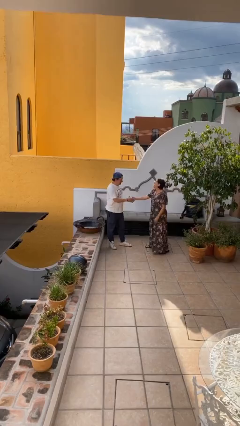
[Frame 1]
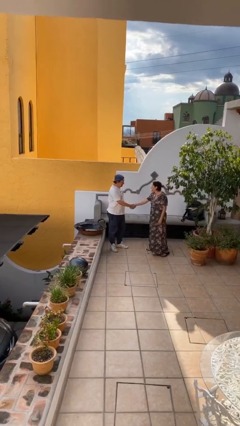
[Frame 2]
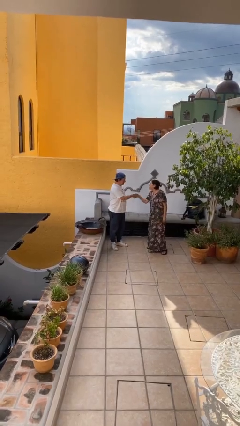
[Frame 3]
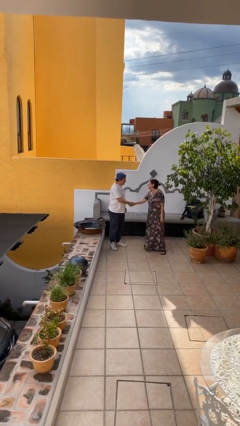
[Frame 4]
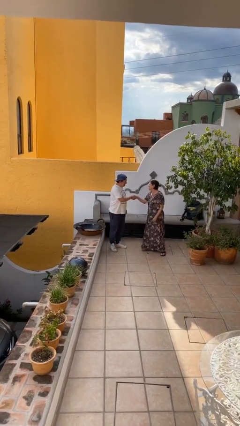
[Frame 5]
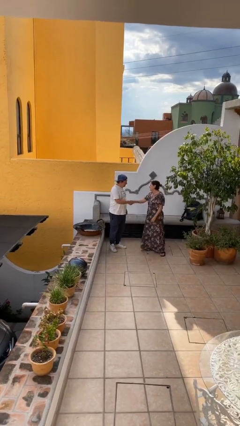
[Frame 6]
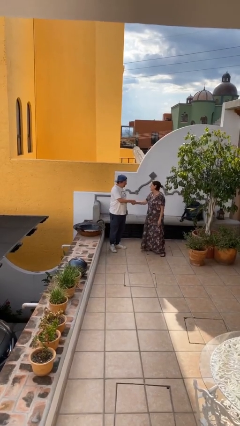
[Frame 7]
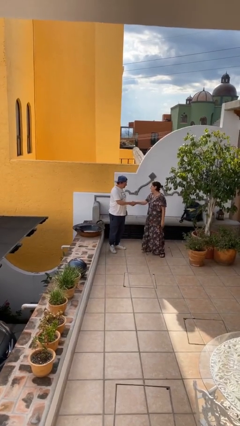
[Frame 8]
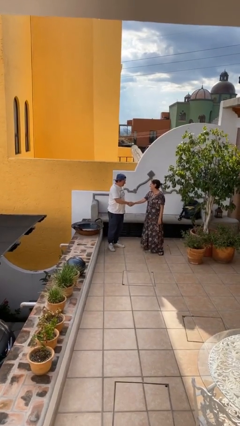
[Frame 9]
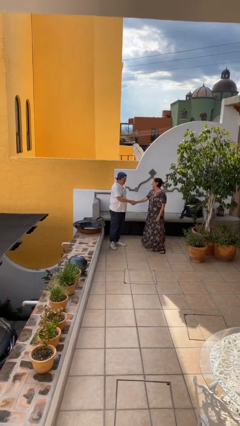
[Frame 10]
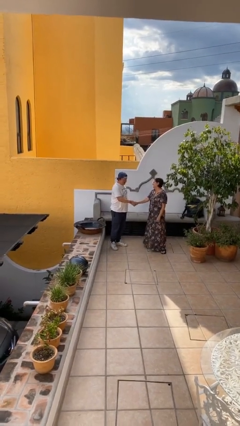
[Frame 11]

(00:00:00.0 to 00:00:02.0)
person shakes hand

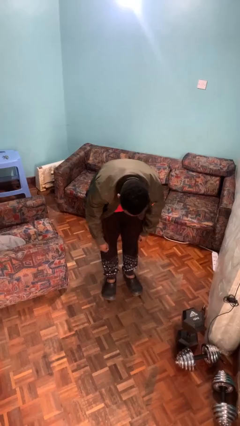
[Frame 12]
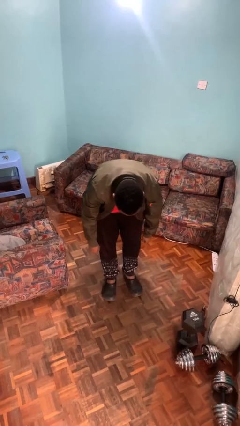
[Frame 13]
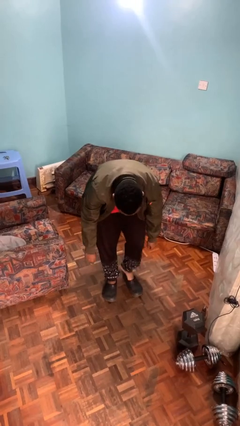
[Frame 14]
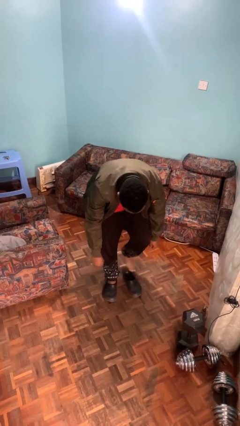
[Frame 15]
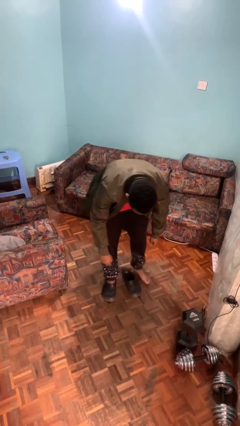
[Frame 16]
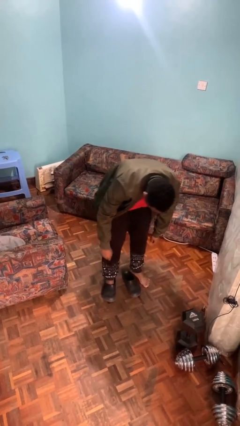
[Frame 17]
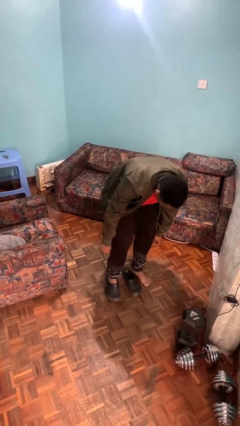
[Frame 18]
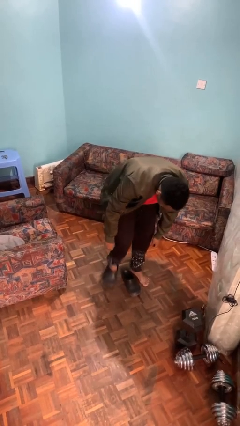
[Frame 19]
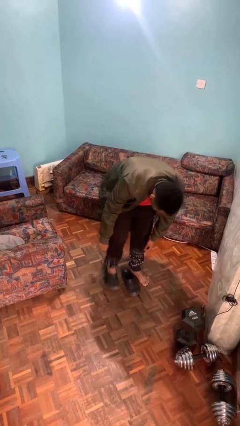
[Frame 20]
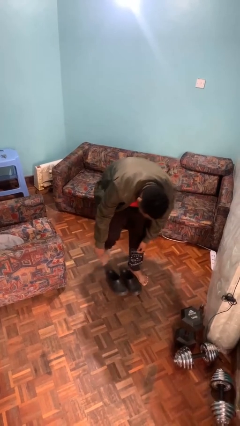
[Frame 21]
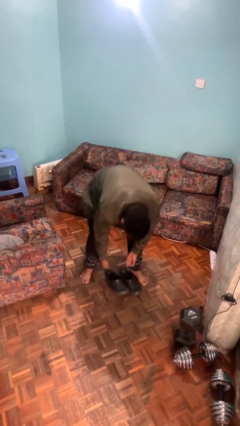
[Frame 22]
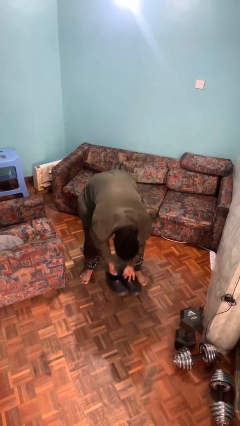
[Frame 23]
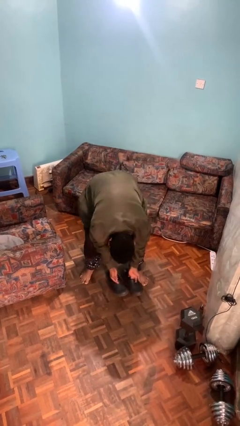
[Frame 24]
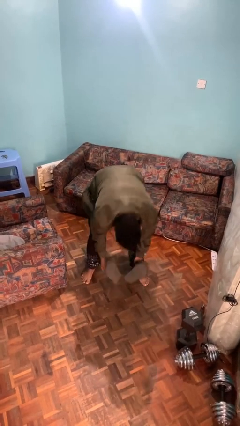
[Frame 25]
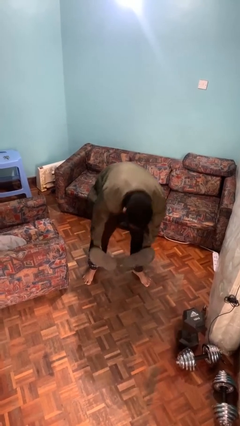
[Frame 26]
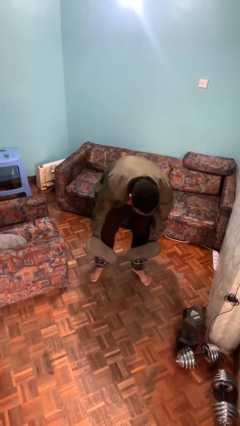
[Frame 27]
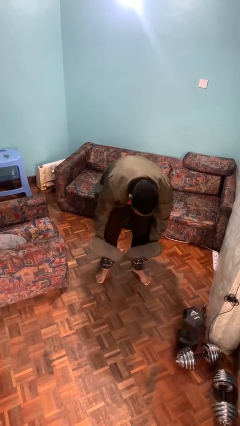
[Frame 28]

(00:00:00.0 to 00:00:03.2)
person takes off shoes

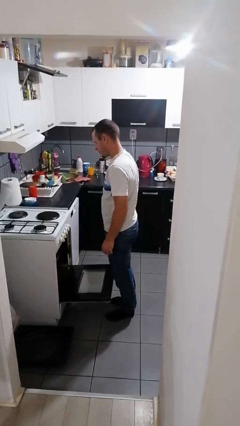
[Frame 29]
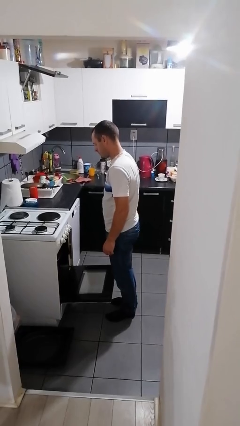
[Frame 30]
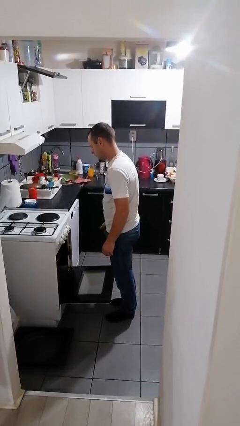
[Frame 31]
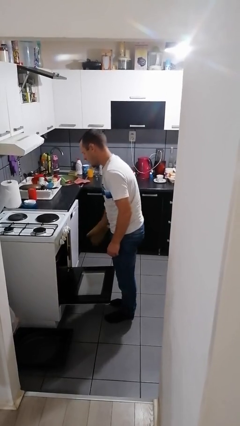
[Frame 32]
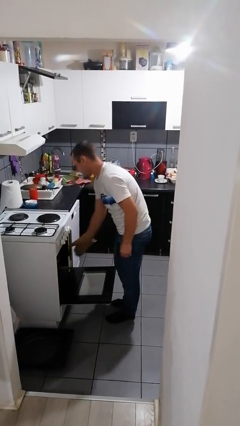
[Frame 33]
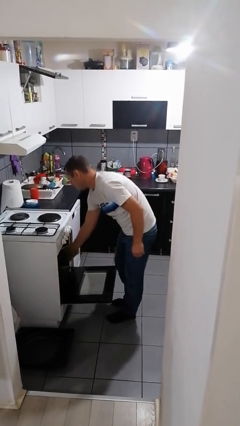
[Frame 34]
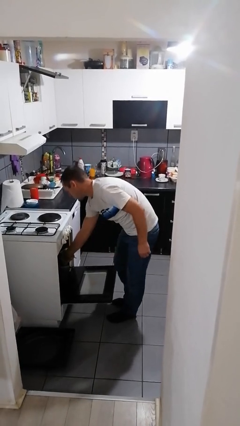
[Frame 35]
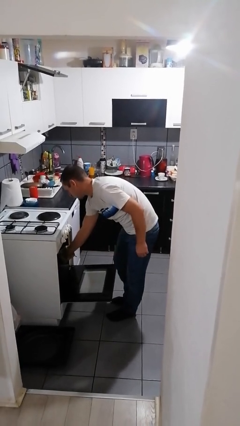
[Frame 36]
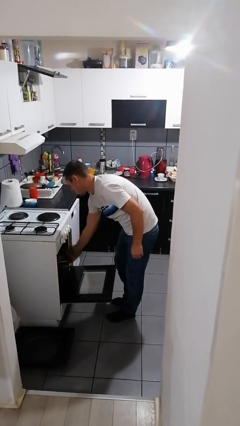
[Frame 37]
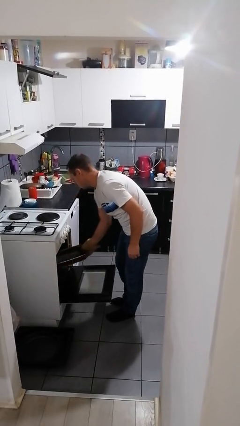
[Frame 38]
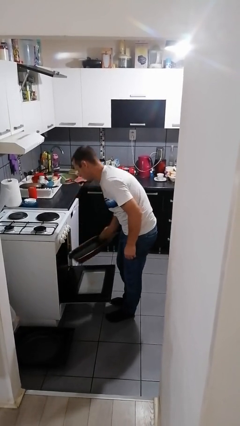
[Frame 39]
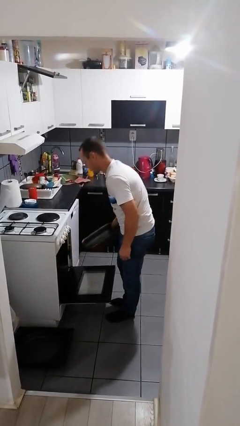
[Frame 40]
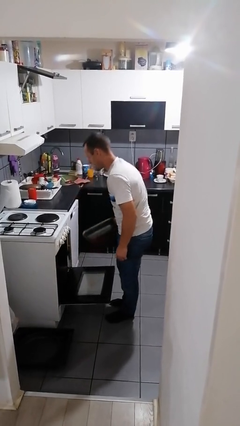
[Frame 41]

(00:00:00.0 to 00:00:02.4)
person takes object from oven

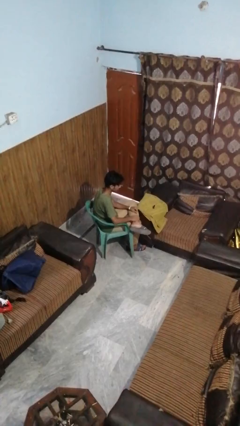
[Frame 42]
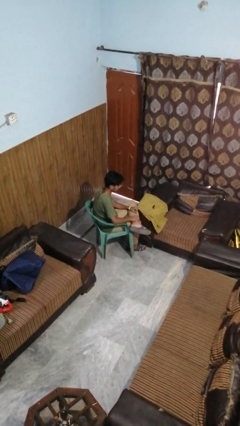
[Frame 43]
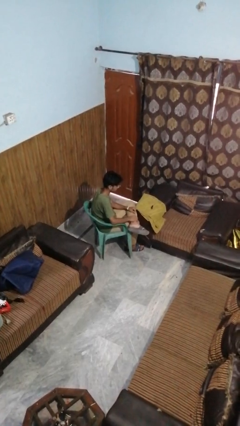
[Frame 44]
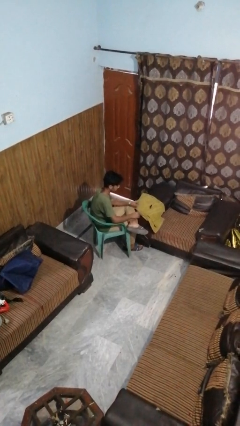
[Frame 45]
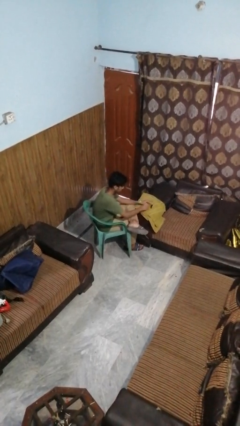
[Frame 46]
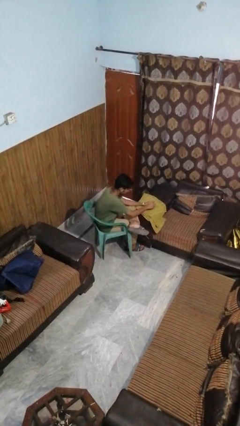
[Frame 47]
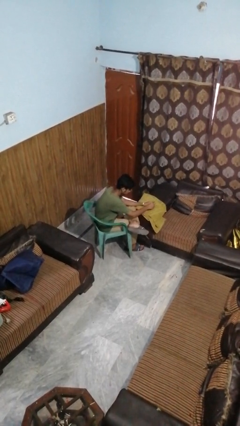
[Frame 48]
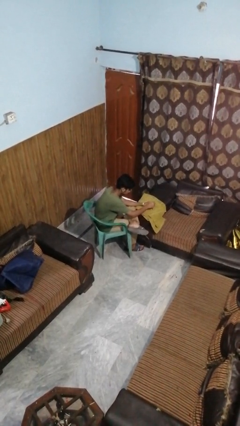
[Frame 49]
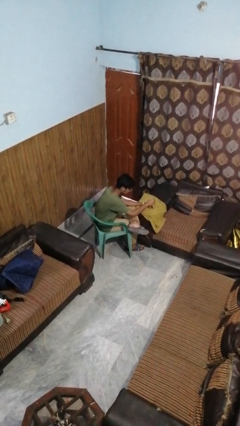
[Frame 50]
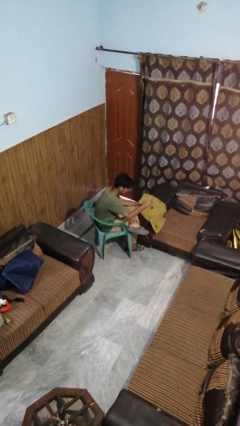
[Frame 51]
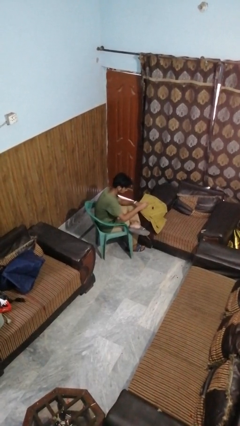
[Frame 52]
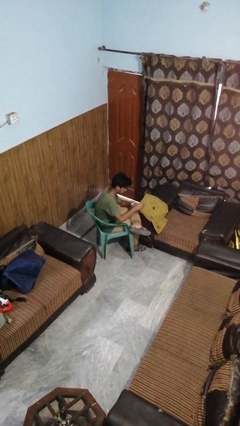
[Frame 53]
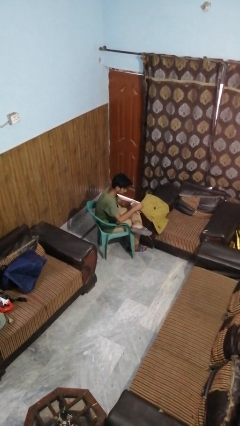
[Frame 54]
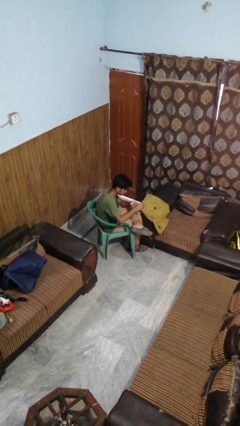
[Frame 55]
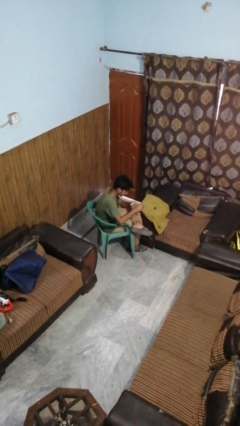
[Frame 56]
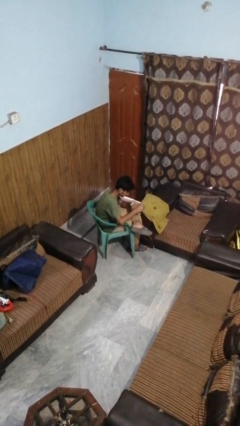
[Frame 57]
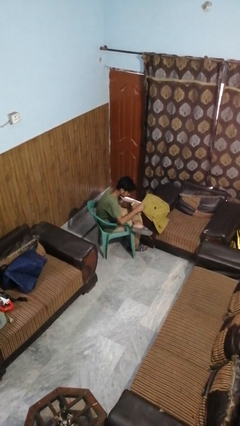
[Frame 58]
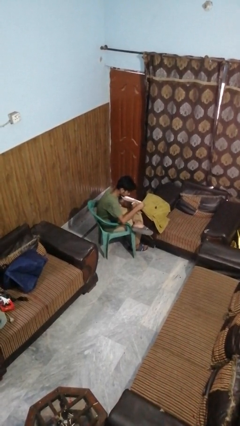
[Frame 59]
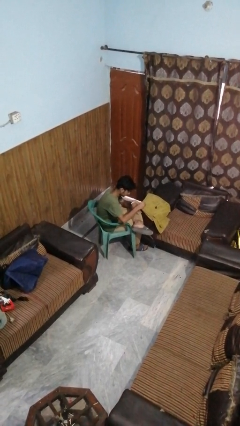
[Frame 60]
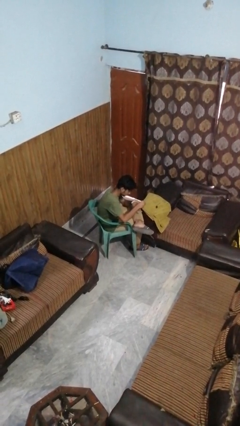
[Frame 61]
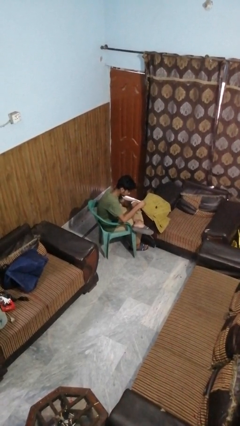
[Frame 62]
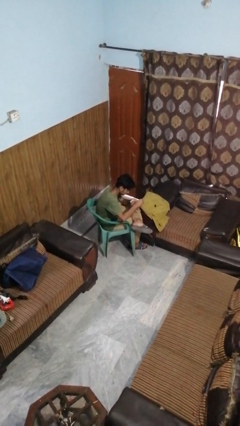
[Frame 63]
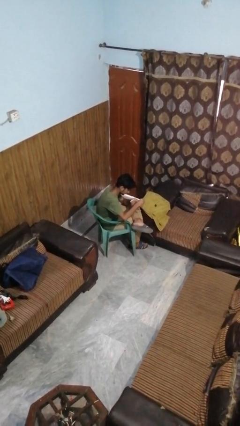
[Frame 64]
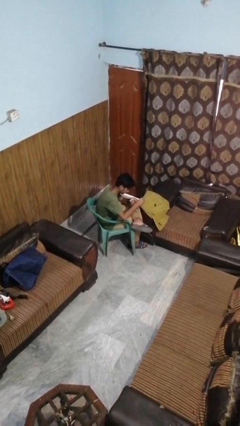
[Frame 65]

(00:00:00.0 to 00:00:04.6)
person paints fingernails

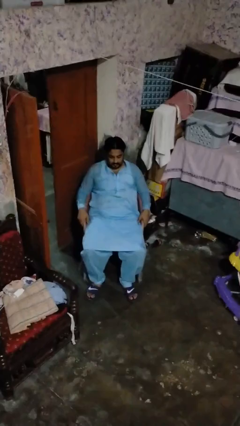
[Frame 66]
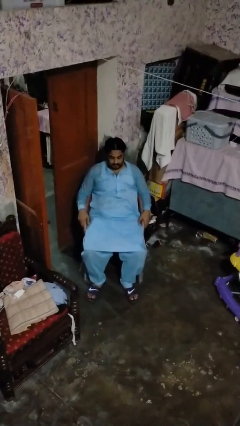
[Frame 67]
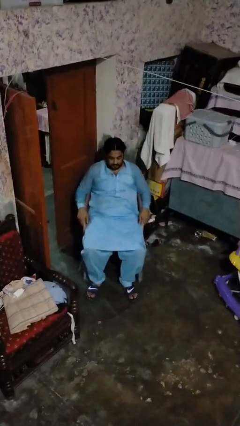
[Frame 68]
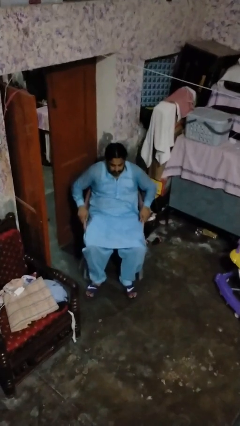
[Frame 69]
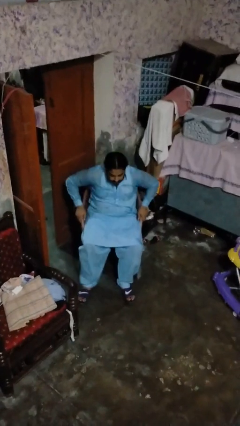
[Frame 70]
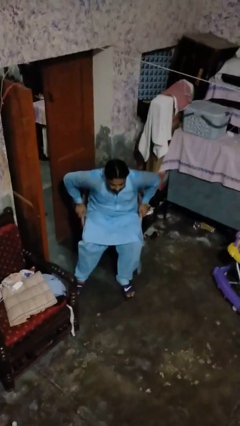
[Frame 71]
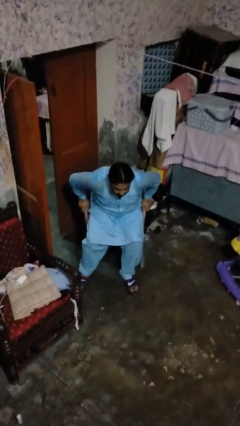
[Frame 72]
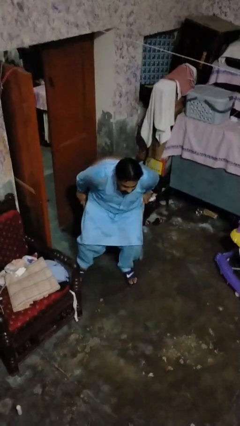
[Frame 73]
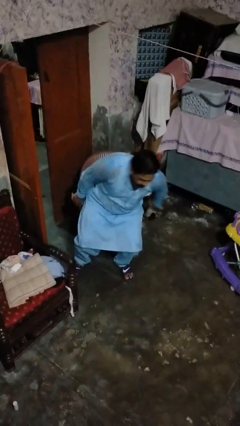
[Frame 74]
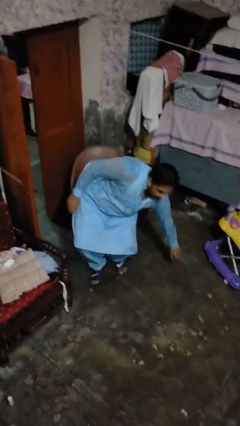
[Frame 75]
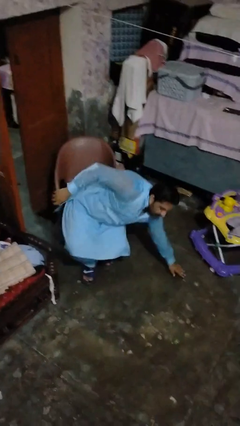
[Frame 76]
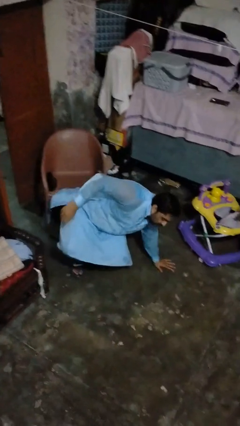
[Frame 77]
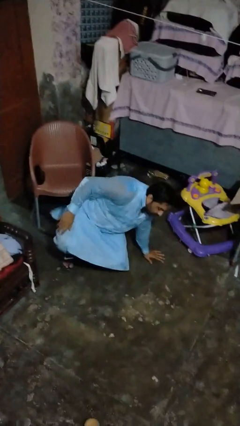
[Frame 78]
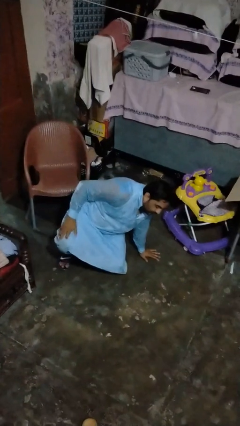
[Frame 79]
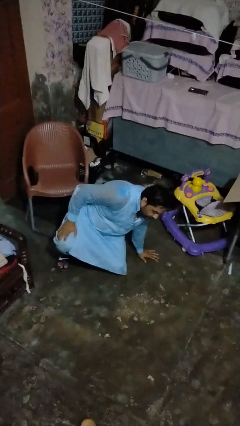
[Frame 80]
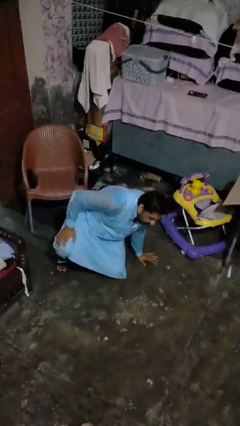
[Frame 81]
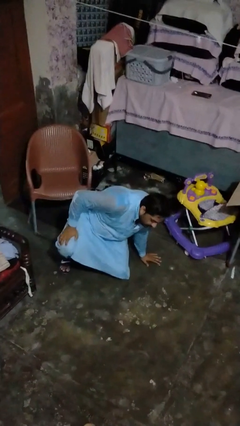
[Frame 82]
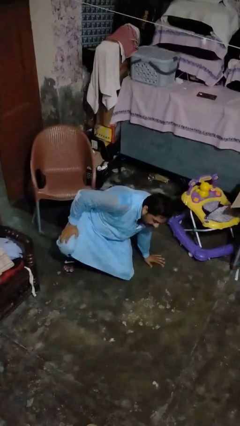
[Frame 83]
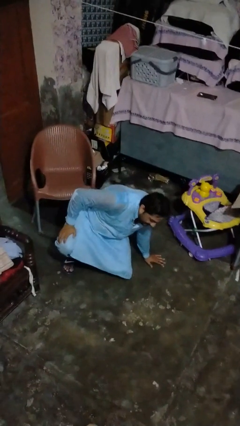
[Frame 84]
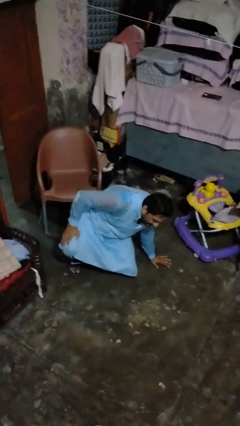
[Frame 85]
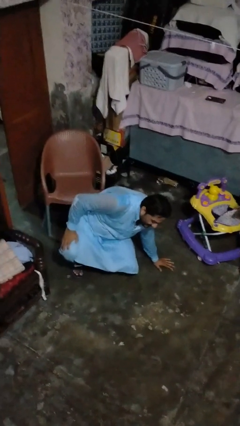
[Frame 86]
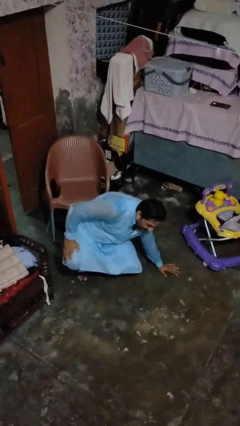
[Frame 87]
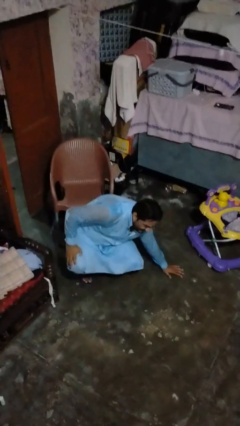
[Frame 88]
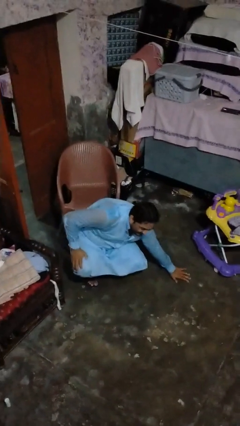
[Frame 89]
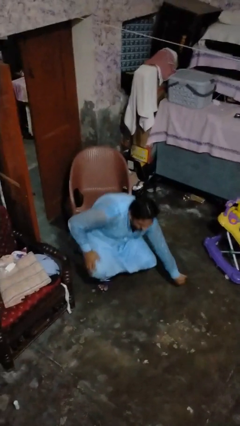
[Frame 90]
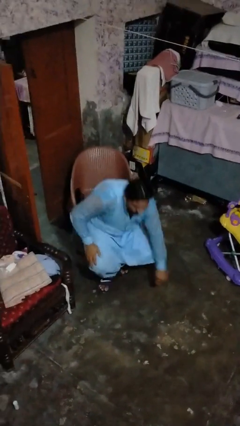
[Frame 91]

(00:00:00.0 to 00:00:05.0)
person falls from chair
